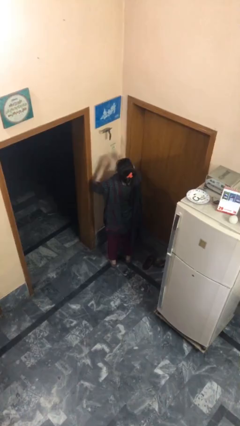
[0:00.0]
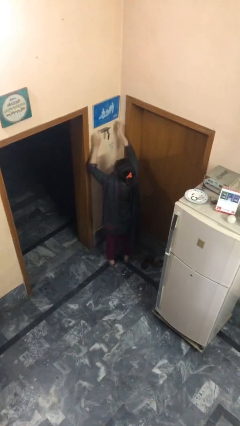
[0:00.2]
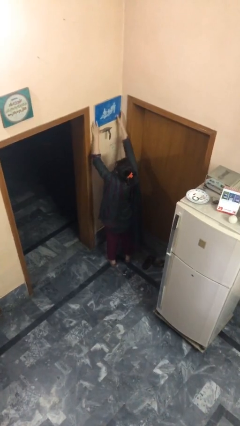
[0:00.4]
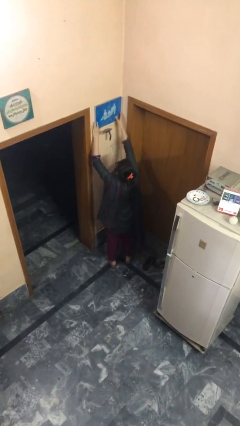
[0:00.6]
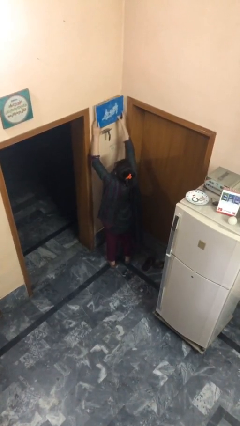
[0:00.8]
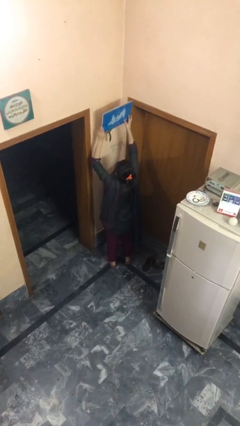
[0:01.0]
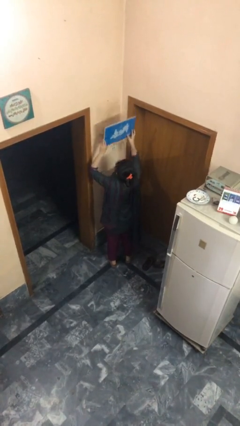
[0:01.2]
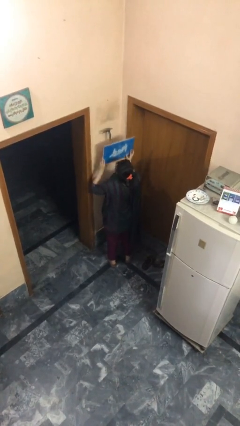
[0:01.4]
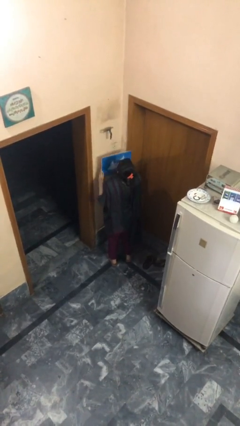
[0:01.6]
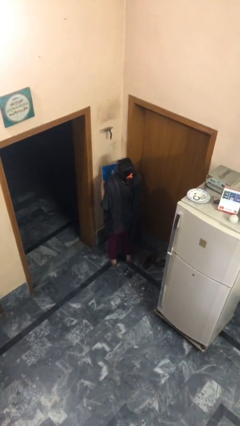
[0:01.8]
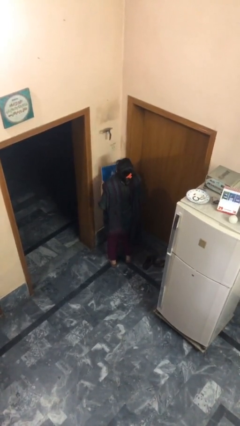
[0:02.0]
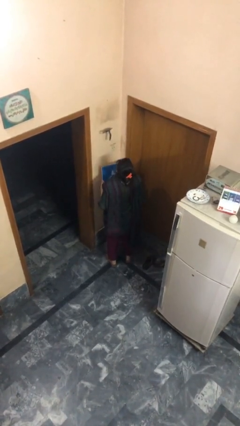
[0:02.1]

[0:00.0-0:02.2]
person takes down picture frame

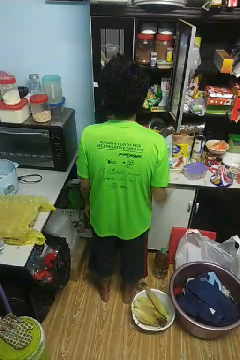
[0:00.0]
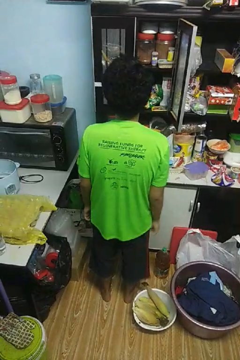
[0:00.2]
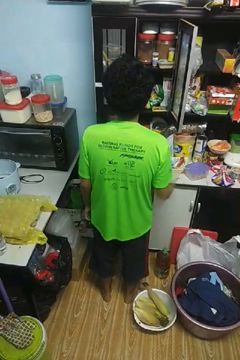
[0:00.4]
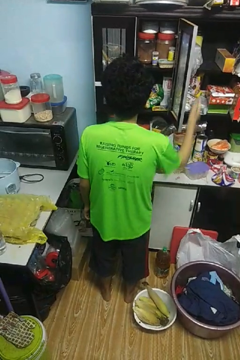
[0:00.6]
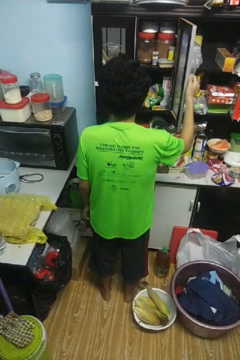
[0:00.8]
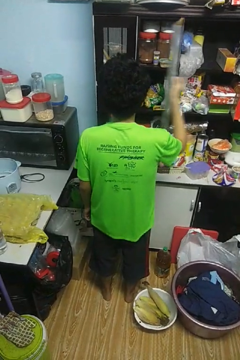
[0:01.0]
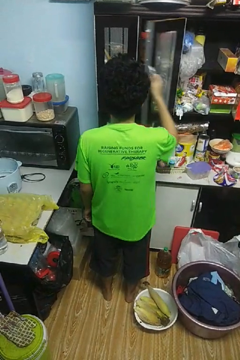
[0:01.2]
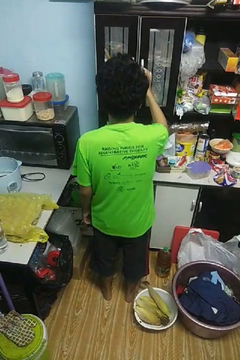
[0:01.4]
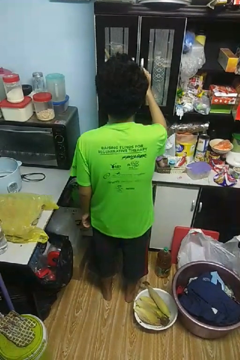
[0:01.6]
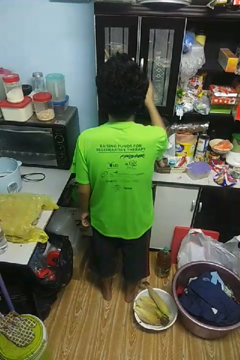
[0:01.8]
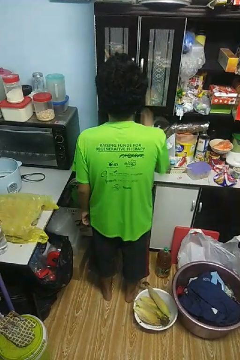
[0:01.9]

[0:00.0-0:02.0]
person closes cabinet

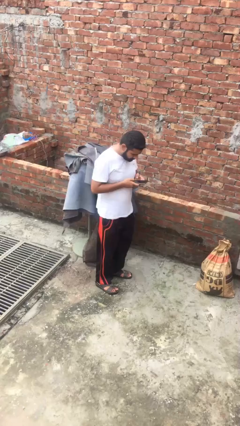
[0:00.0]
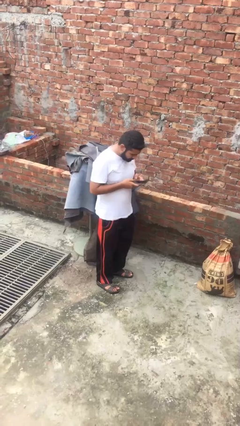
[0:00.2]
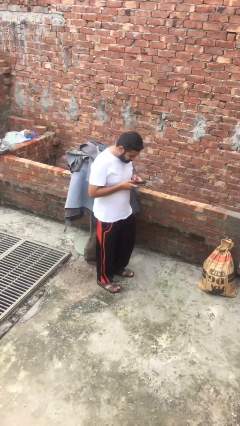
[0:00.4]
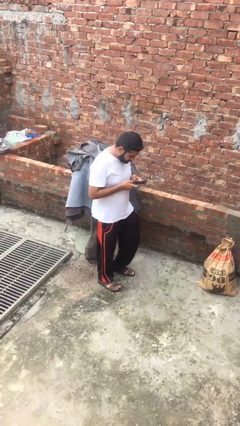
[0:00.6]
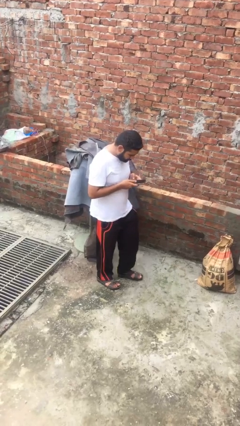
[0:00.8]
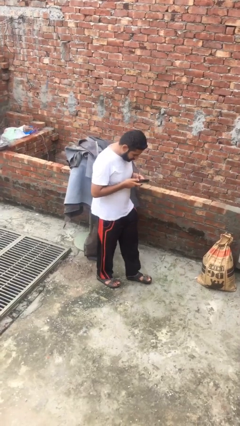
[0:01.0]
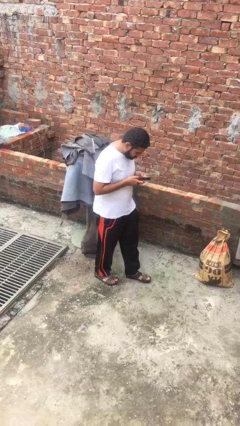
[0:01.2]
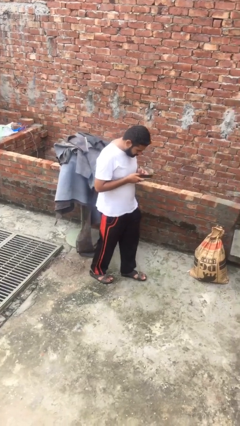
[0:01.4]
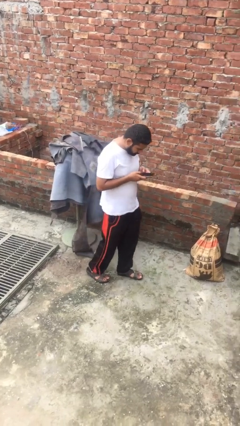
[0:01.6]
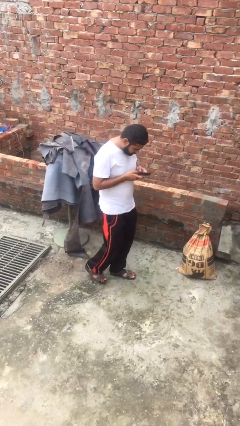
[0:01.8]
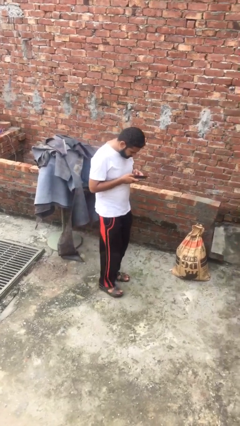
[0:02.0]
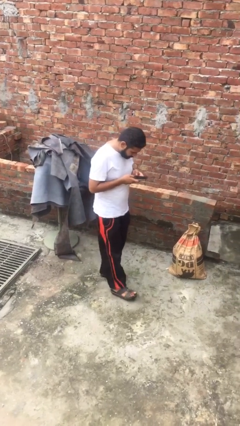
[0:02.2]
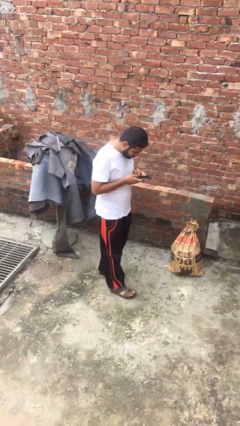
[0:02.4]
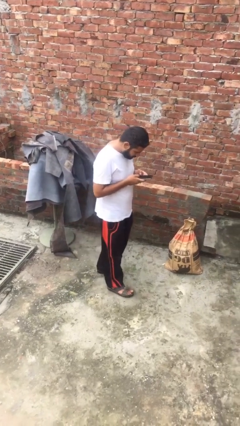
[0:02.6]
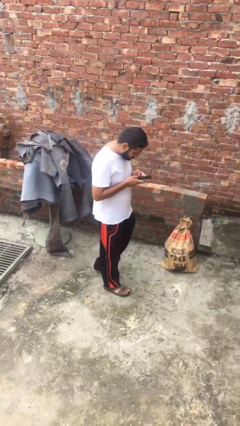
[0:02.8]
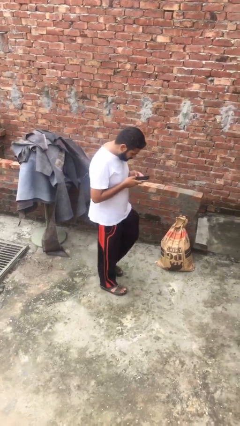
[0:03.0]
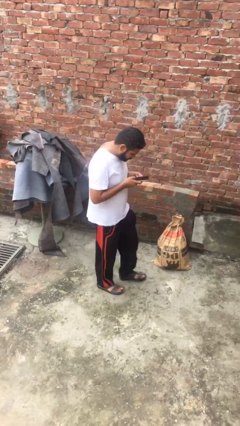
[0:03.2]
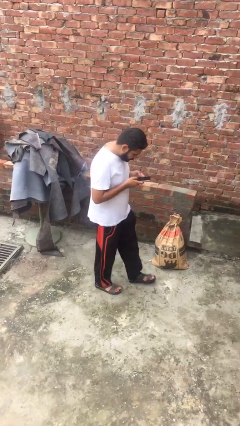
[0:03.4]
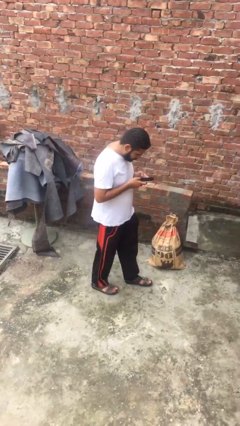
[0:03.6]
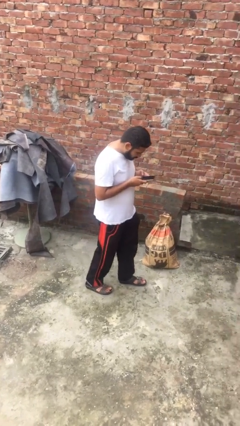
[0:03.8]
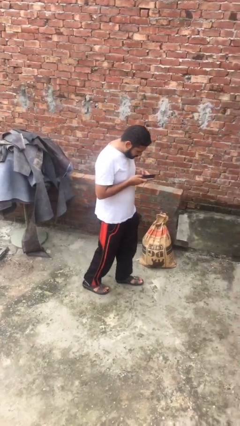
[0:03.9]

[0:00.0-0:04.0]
person texts on phone

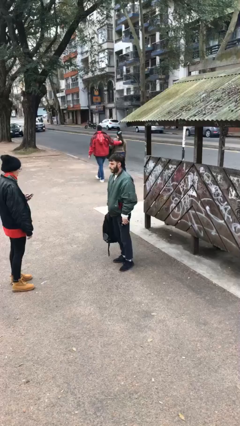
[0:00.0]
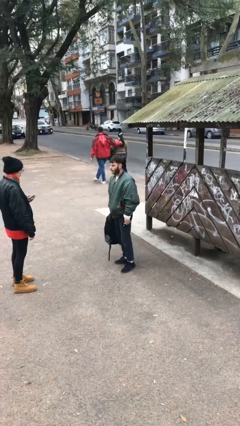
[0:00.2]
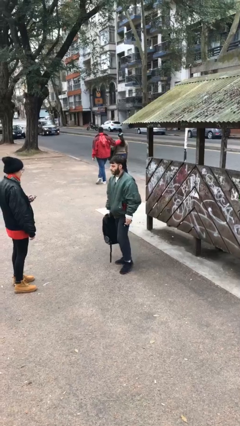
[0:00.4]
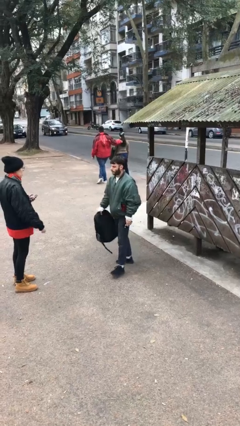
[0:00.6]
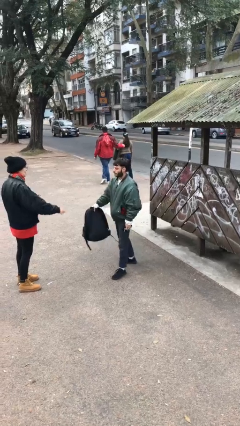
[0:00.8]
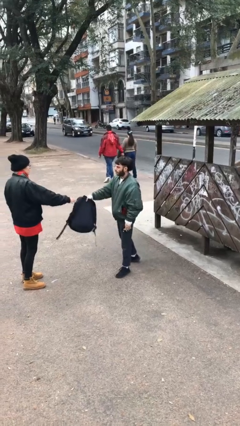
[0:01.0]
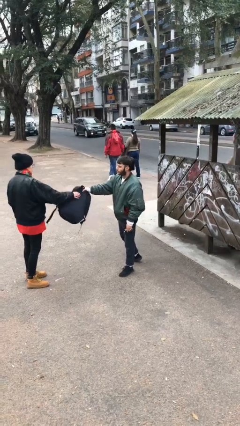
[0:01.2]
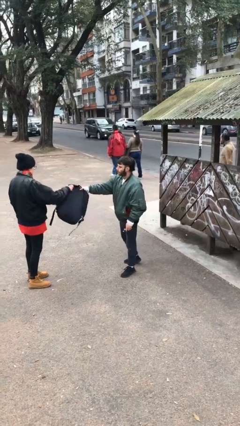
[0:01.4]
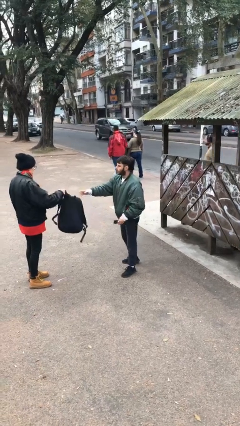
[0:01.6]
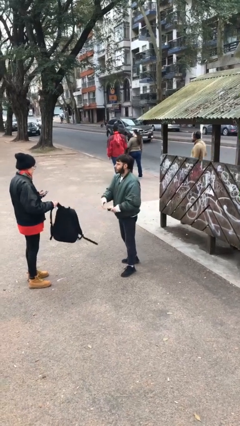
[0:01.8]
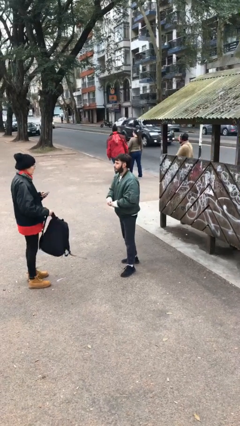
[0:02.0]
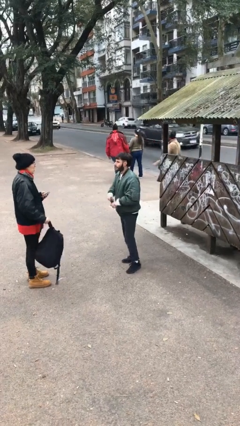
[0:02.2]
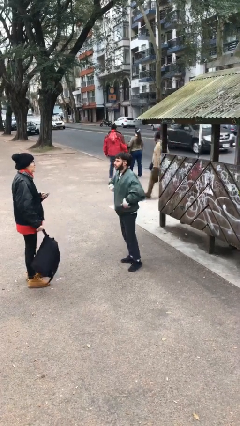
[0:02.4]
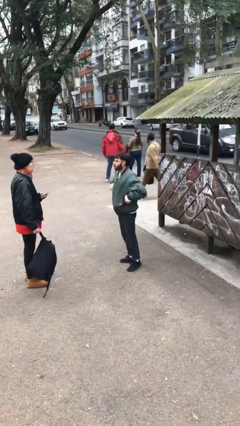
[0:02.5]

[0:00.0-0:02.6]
person transfers object to person

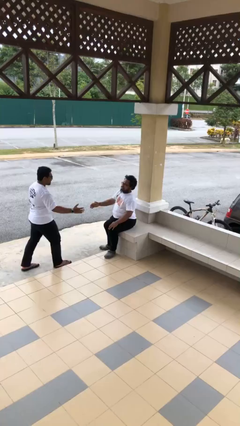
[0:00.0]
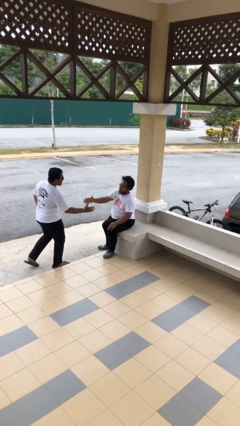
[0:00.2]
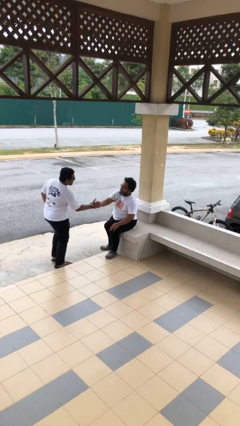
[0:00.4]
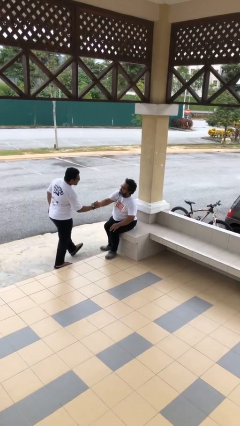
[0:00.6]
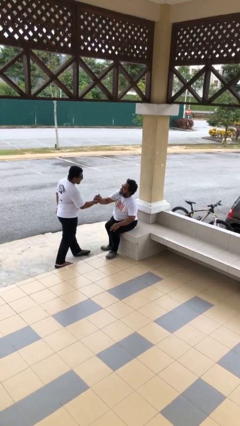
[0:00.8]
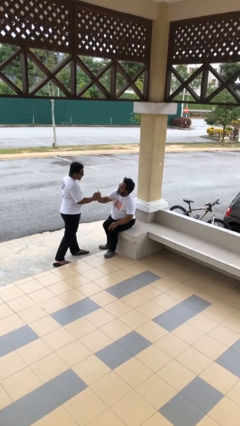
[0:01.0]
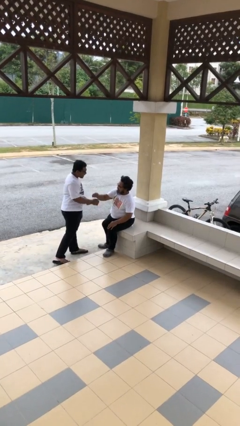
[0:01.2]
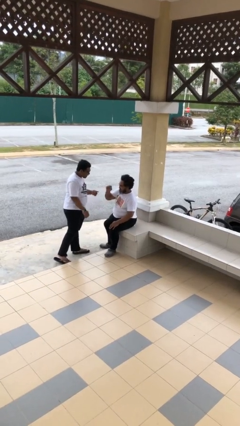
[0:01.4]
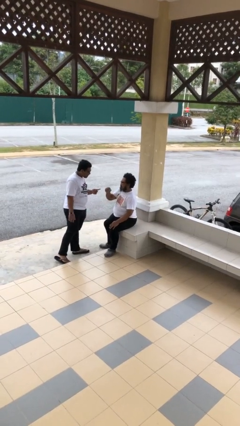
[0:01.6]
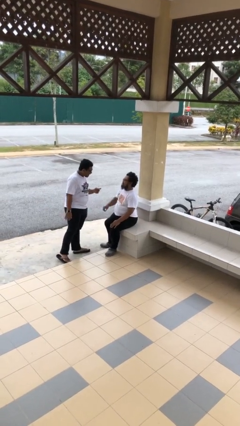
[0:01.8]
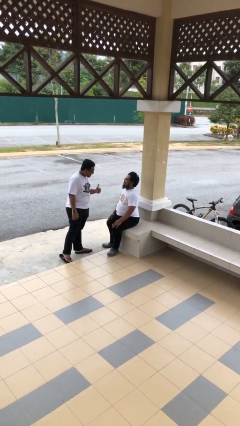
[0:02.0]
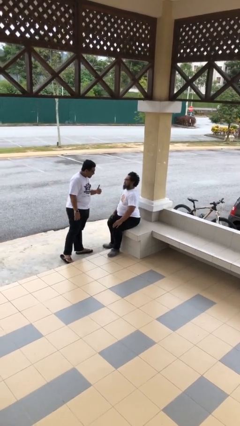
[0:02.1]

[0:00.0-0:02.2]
person shakes hand

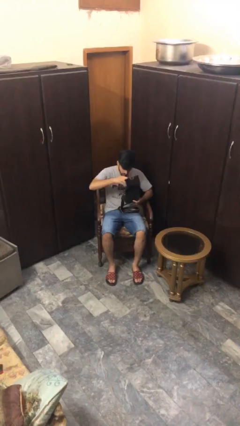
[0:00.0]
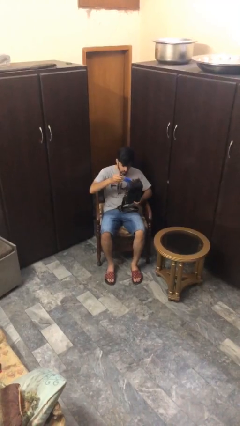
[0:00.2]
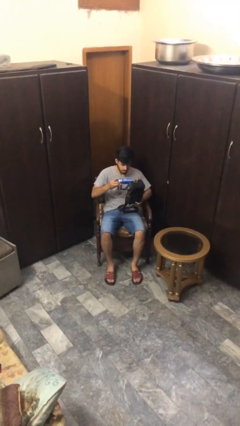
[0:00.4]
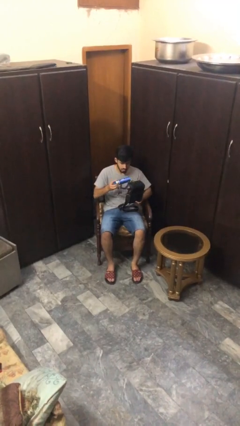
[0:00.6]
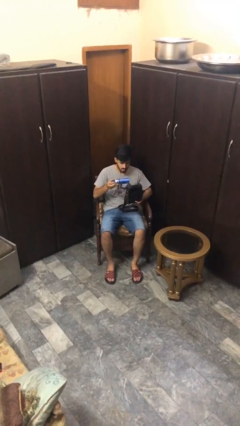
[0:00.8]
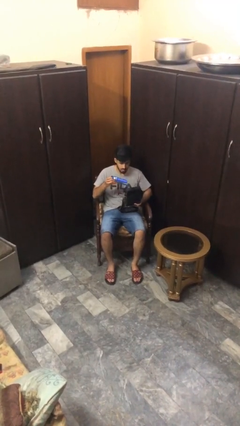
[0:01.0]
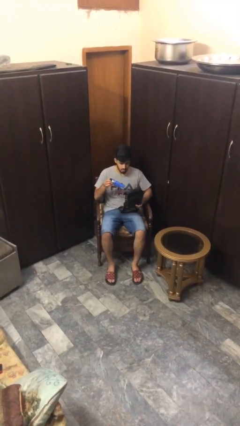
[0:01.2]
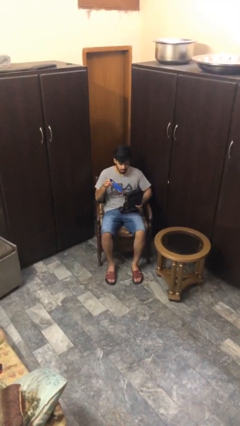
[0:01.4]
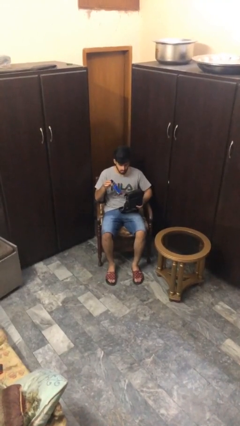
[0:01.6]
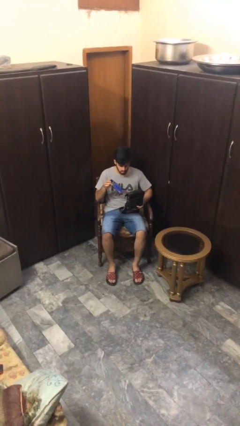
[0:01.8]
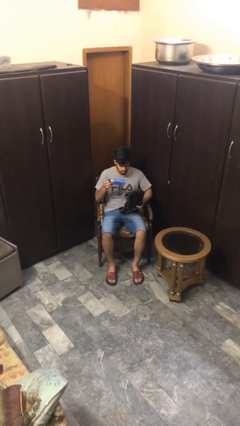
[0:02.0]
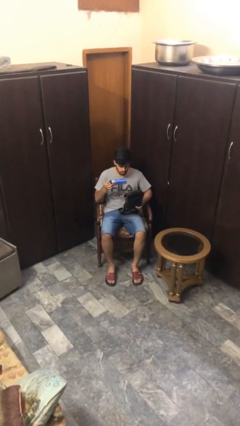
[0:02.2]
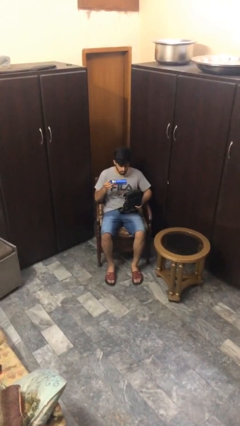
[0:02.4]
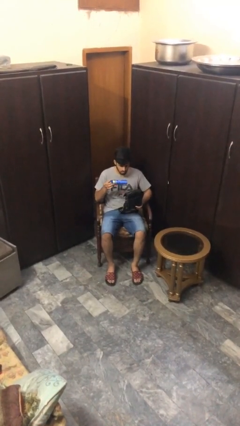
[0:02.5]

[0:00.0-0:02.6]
person takes object from purse

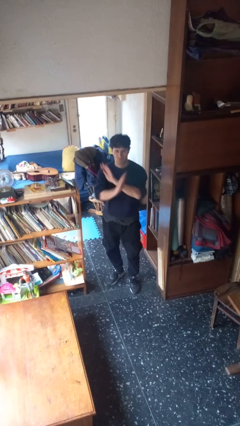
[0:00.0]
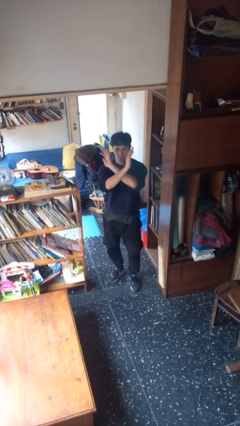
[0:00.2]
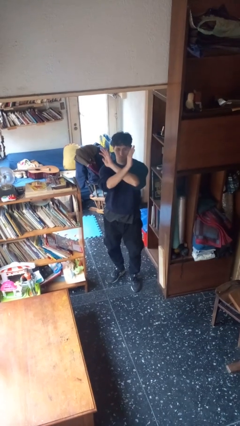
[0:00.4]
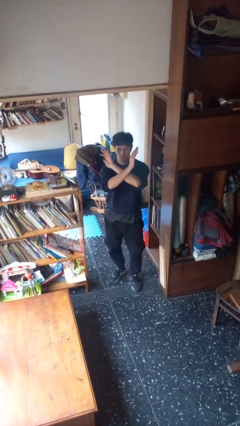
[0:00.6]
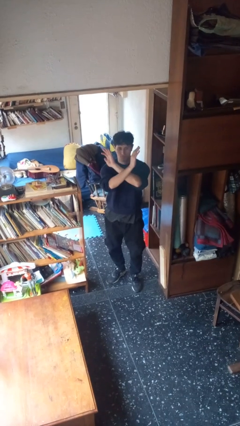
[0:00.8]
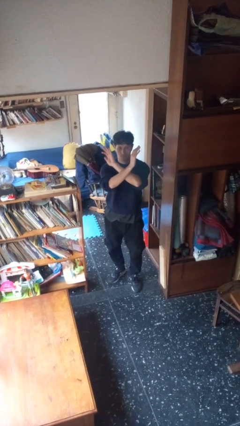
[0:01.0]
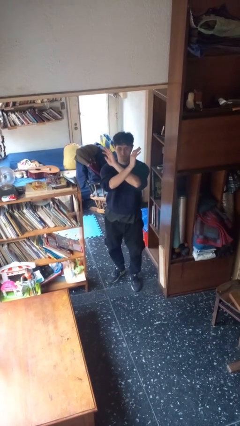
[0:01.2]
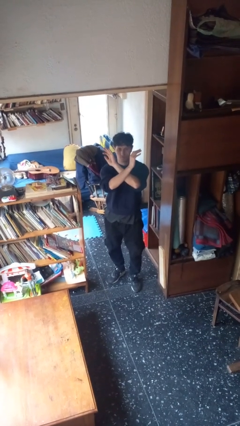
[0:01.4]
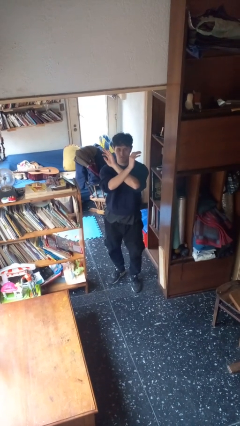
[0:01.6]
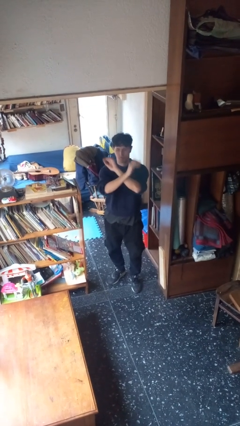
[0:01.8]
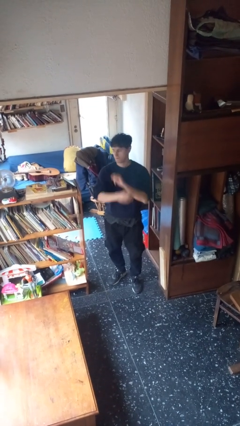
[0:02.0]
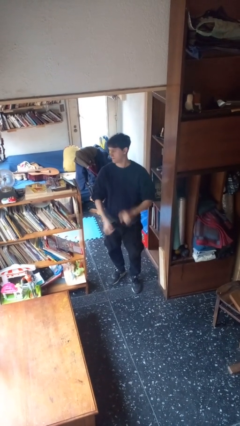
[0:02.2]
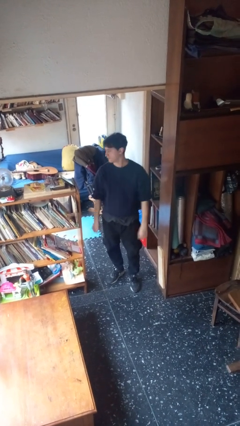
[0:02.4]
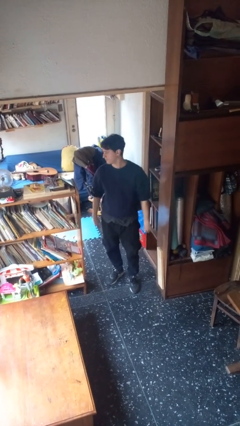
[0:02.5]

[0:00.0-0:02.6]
person gestures arms x
